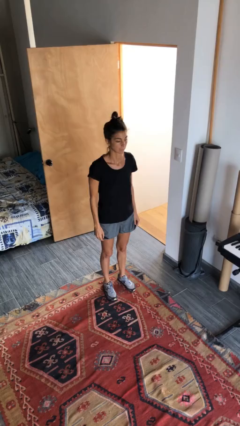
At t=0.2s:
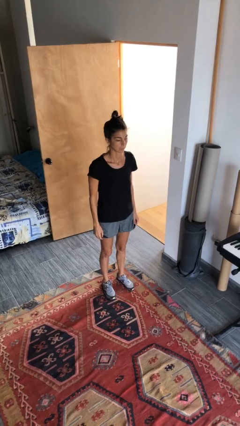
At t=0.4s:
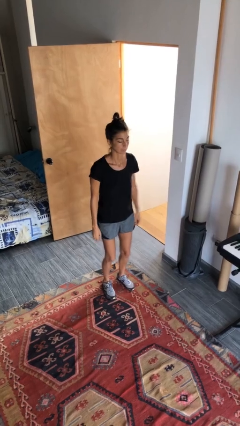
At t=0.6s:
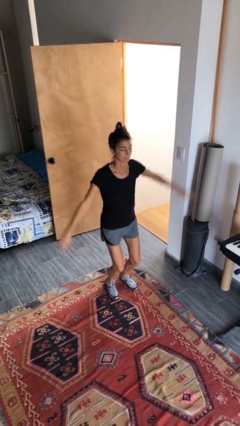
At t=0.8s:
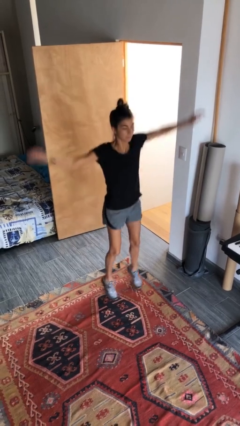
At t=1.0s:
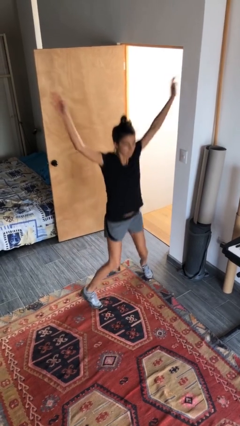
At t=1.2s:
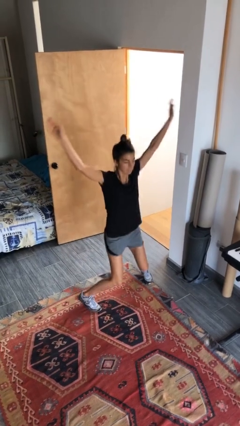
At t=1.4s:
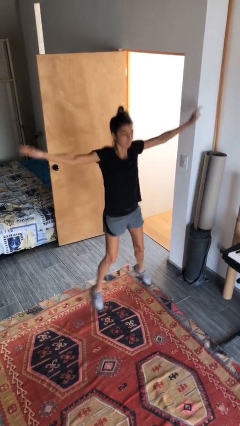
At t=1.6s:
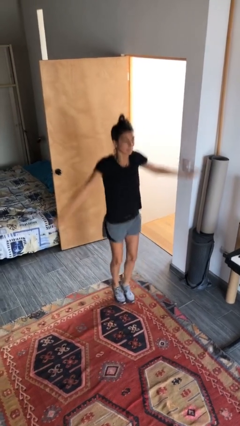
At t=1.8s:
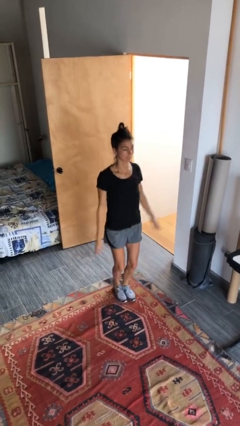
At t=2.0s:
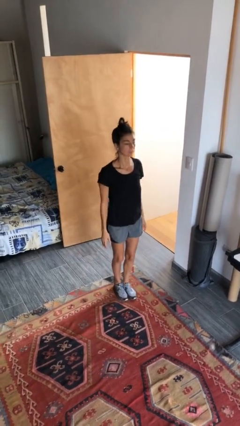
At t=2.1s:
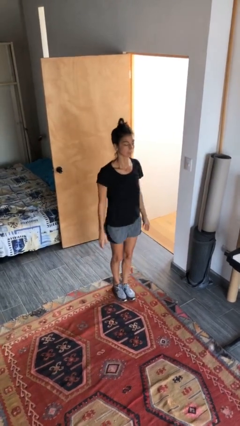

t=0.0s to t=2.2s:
person exercises with jumping jacks

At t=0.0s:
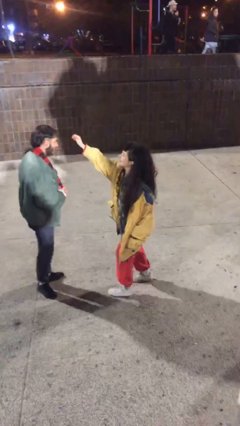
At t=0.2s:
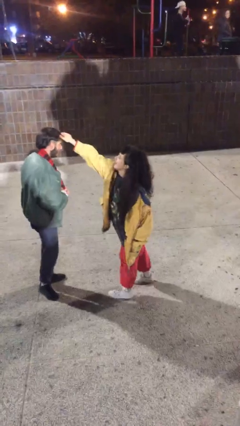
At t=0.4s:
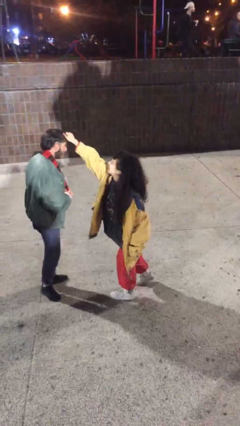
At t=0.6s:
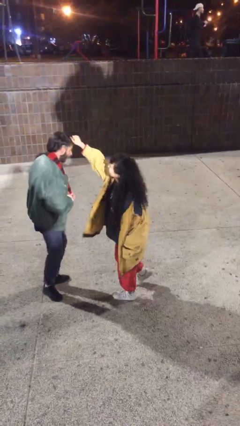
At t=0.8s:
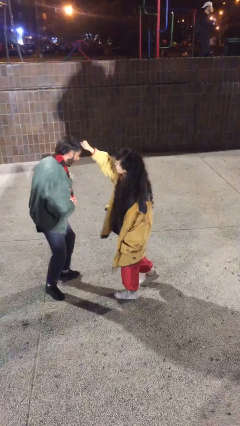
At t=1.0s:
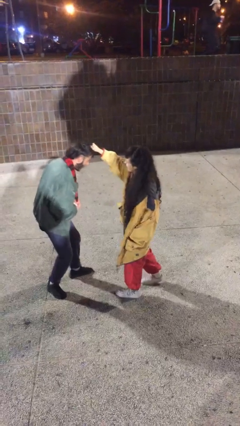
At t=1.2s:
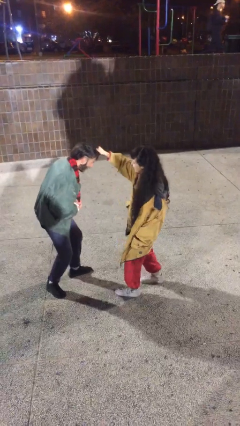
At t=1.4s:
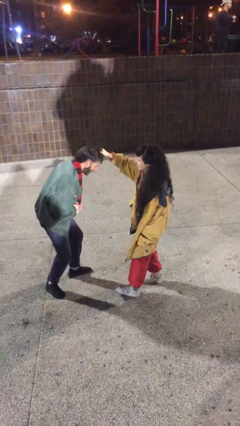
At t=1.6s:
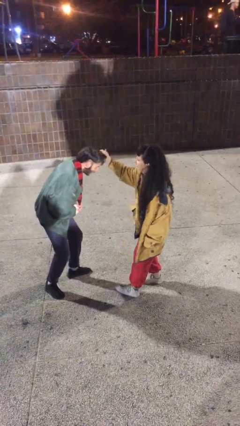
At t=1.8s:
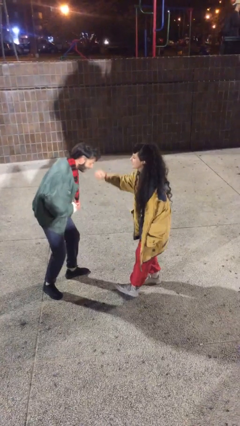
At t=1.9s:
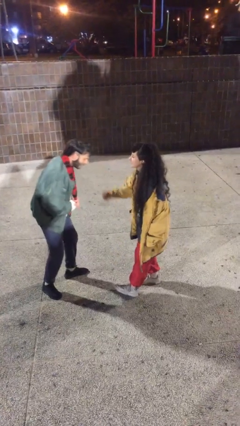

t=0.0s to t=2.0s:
person grabs person by hair

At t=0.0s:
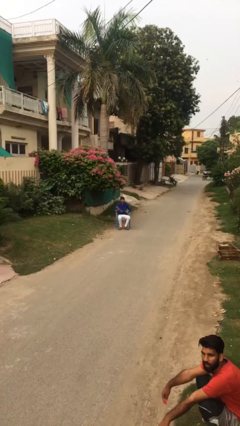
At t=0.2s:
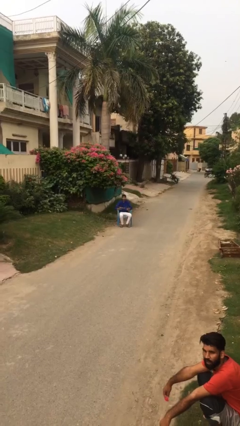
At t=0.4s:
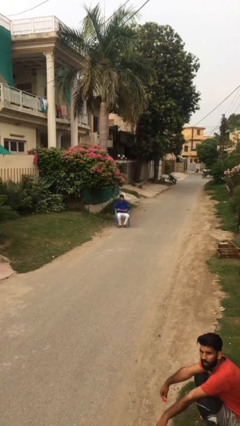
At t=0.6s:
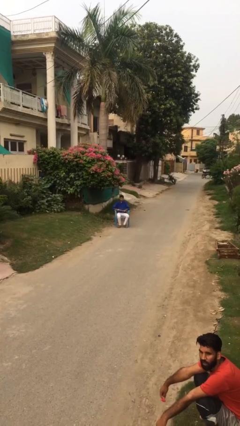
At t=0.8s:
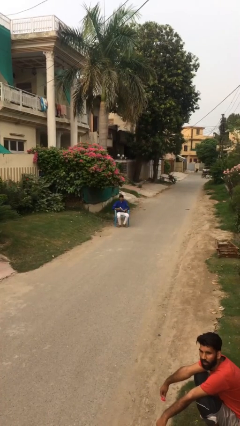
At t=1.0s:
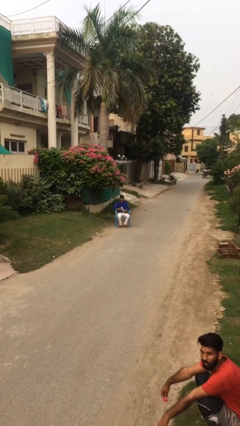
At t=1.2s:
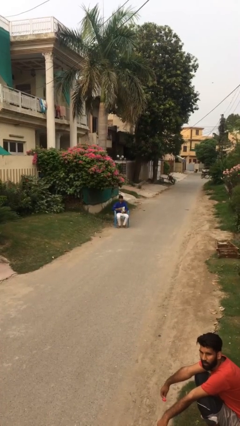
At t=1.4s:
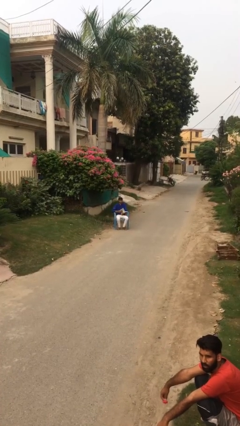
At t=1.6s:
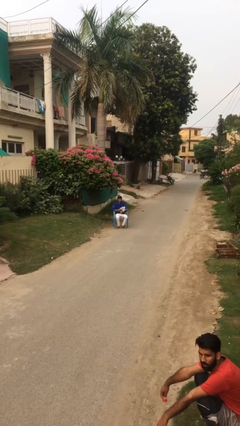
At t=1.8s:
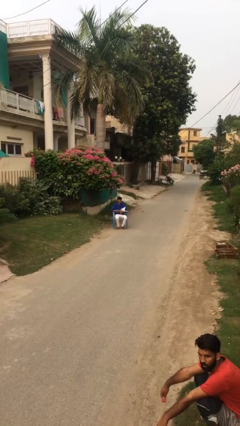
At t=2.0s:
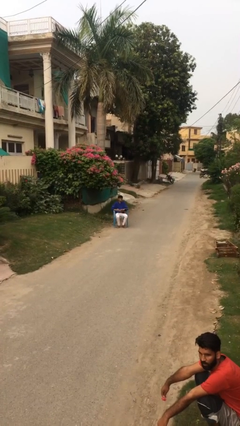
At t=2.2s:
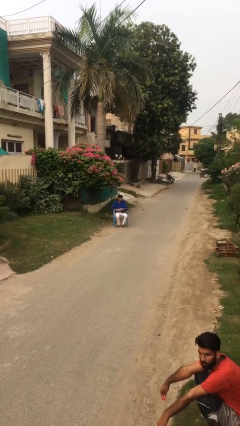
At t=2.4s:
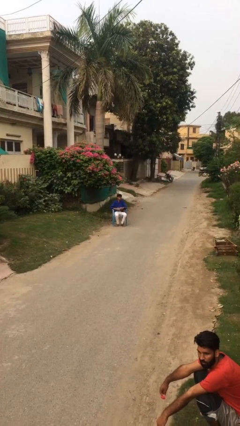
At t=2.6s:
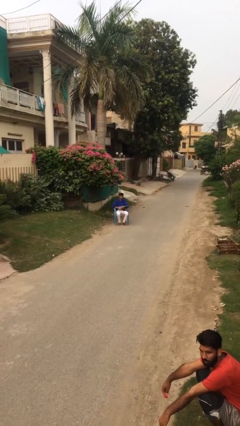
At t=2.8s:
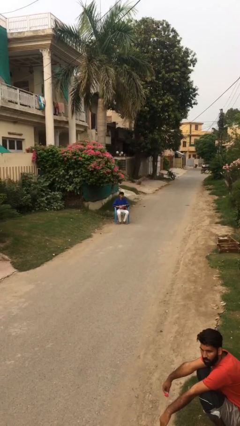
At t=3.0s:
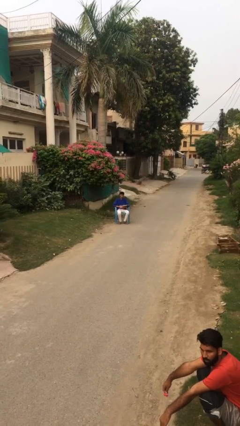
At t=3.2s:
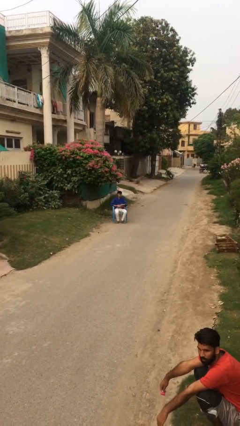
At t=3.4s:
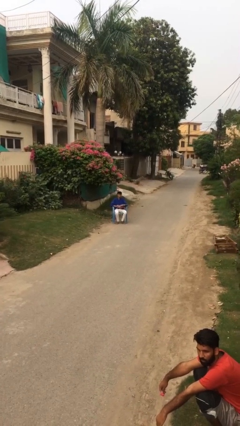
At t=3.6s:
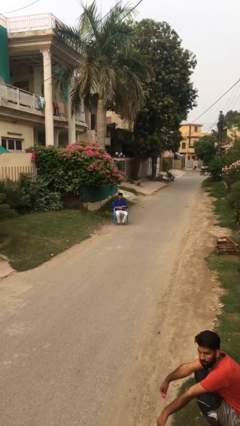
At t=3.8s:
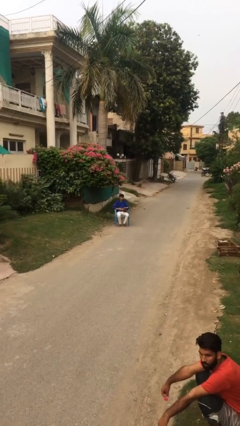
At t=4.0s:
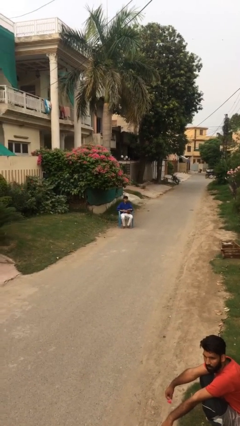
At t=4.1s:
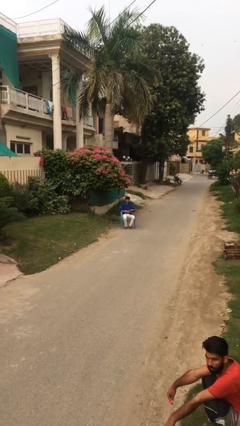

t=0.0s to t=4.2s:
person reads document

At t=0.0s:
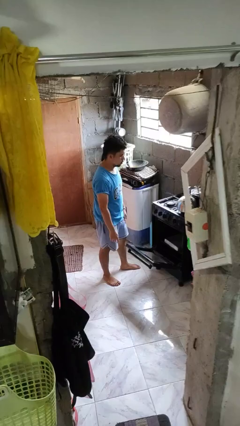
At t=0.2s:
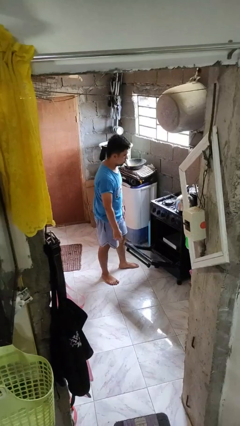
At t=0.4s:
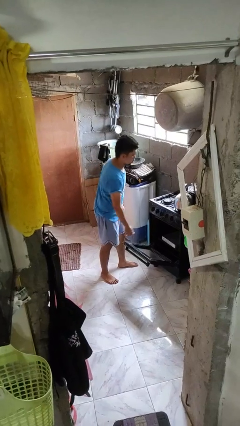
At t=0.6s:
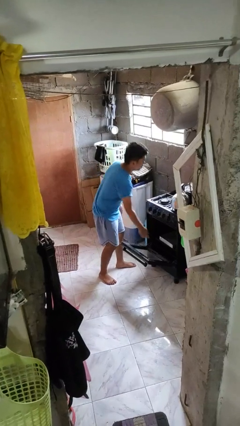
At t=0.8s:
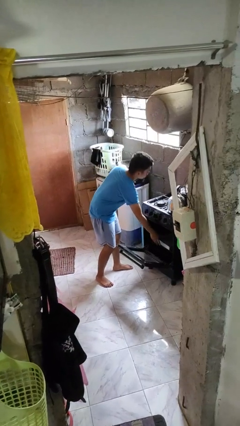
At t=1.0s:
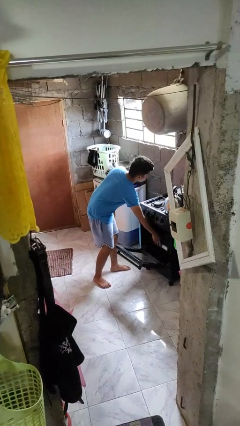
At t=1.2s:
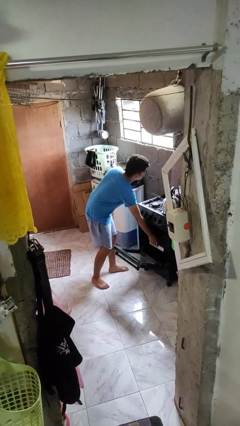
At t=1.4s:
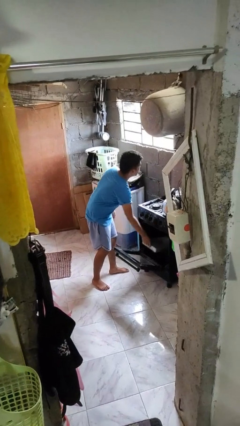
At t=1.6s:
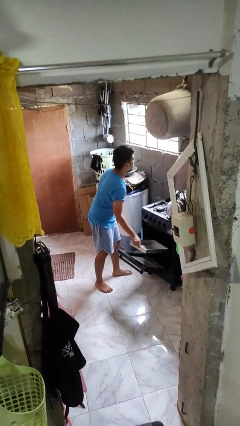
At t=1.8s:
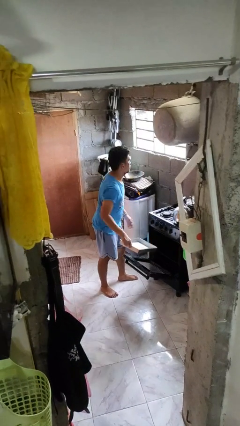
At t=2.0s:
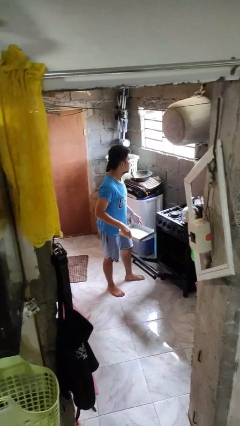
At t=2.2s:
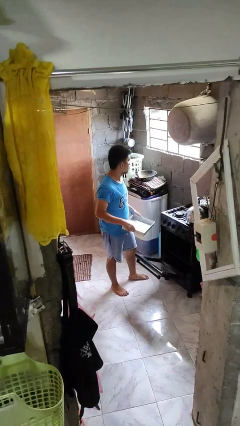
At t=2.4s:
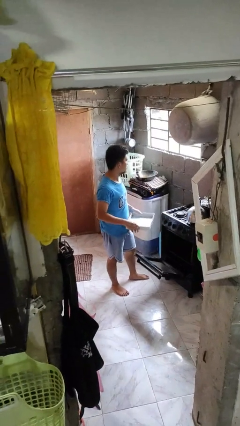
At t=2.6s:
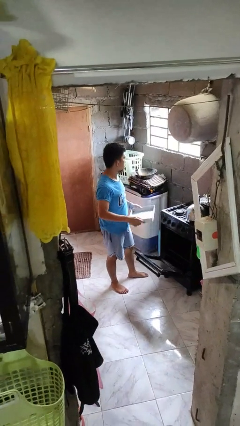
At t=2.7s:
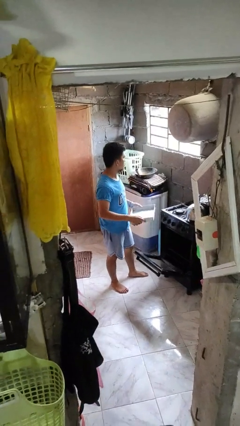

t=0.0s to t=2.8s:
person takes object from oven

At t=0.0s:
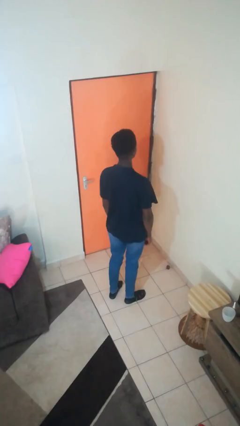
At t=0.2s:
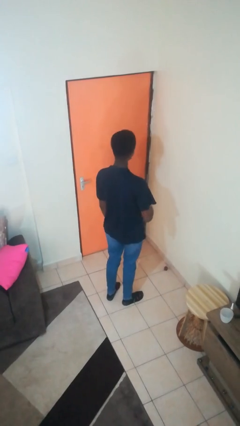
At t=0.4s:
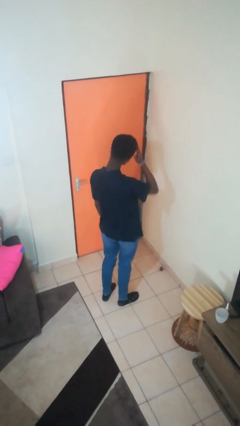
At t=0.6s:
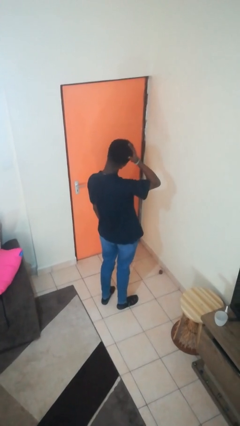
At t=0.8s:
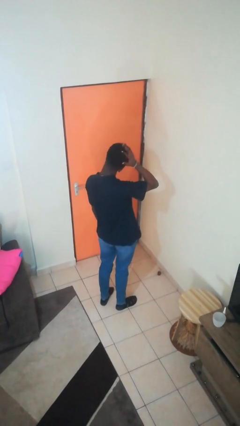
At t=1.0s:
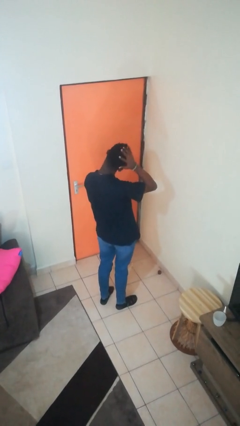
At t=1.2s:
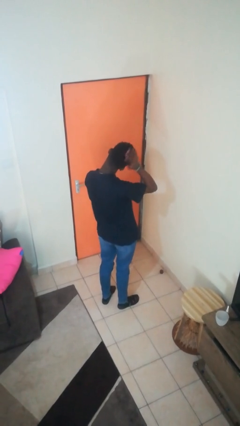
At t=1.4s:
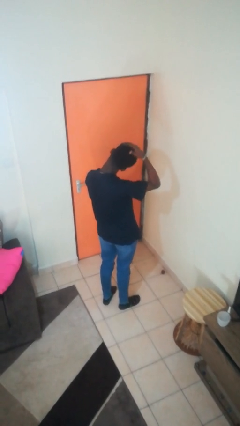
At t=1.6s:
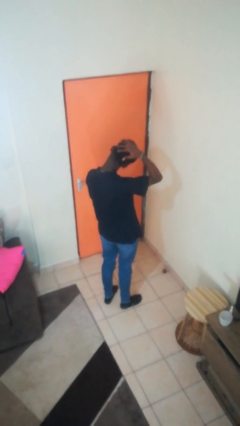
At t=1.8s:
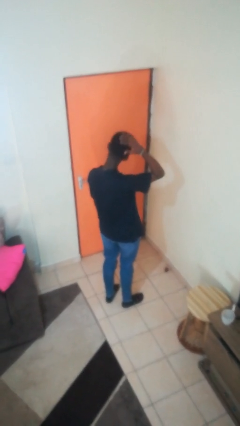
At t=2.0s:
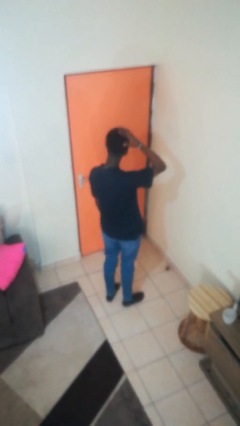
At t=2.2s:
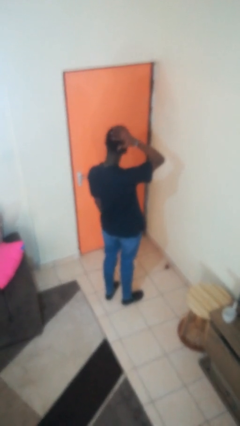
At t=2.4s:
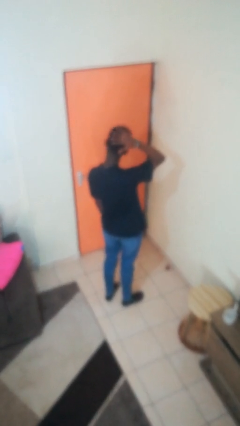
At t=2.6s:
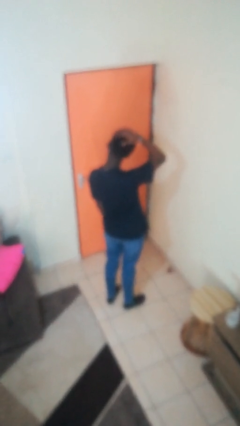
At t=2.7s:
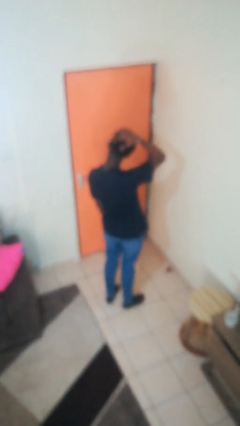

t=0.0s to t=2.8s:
person strokes hair

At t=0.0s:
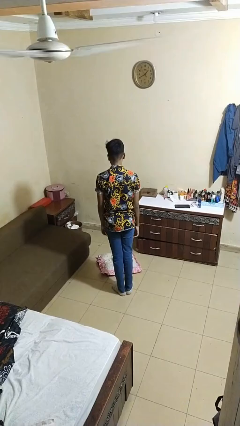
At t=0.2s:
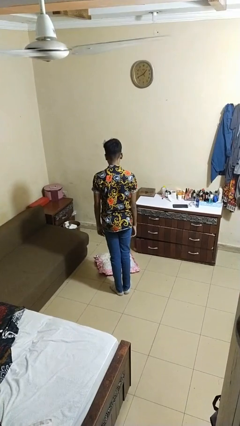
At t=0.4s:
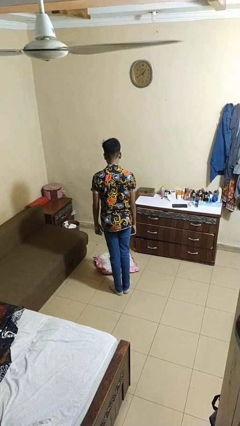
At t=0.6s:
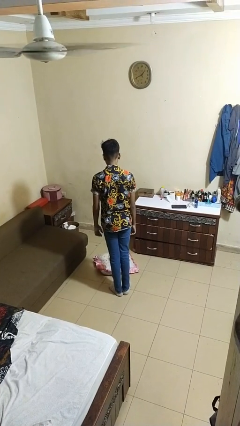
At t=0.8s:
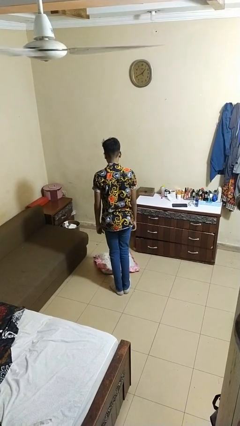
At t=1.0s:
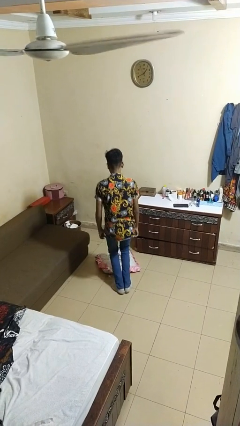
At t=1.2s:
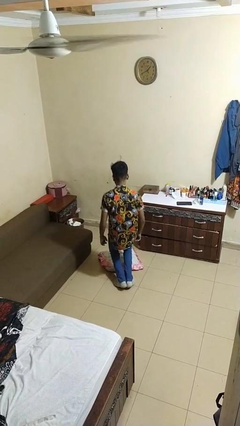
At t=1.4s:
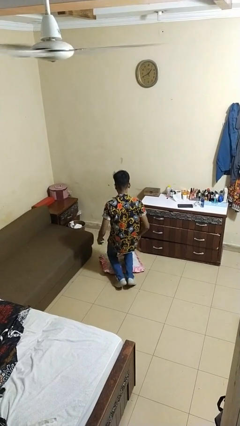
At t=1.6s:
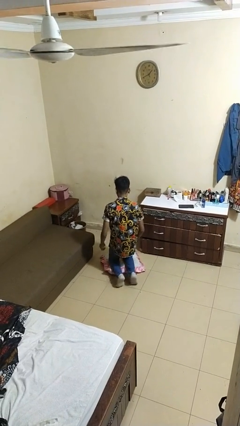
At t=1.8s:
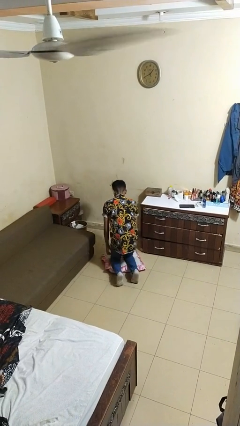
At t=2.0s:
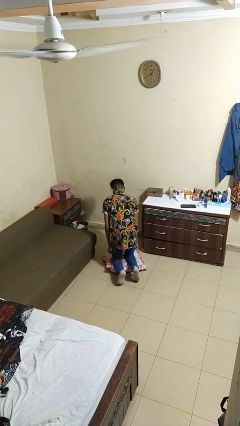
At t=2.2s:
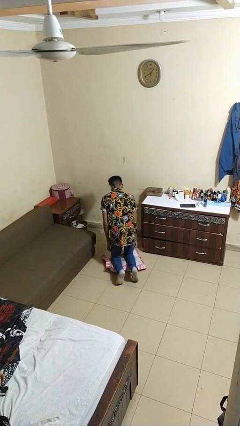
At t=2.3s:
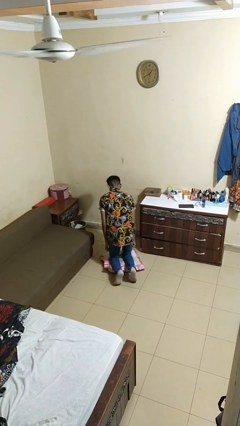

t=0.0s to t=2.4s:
person kneels

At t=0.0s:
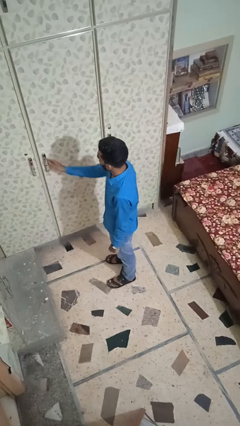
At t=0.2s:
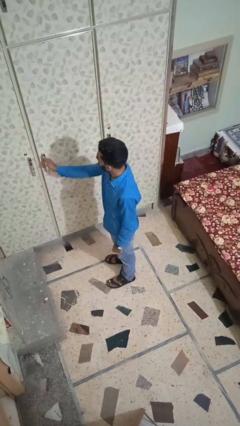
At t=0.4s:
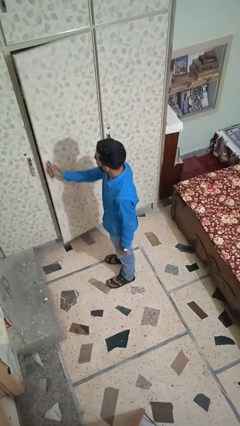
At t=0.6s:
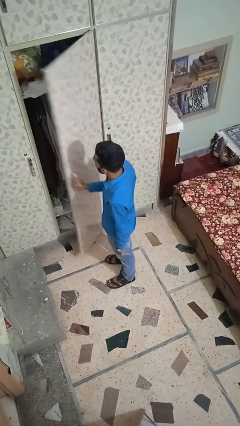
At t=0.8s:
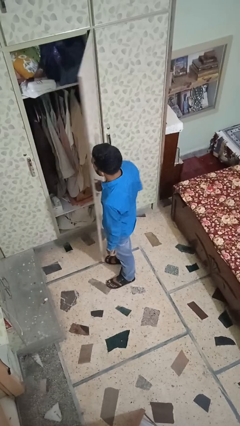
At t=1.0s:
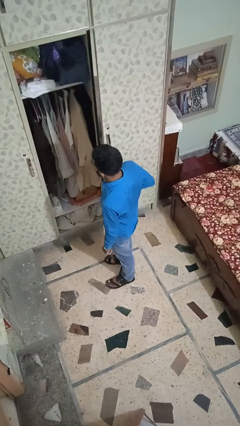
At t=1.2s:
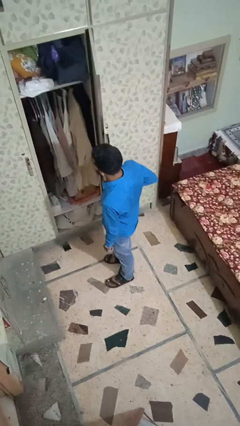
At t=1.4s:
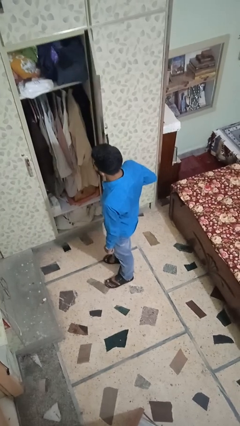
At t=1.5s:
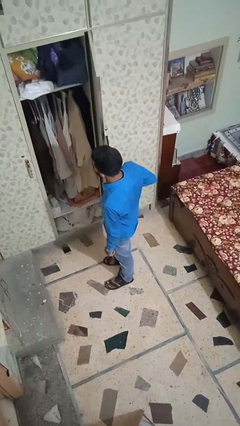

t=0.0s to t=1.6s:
person opens closet door
